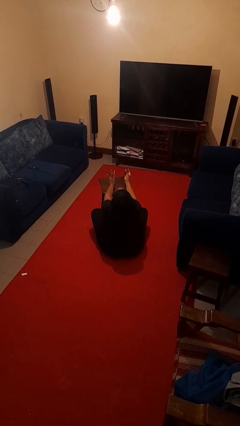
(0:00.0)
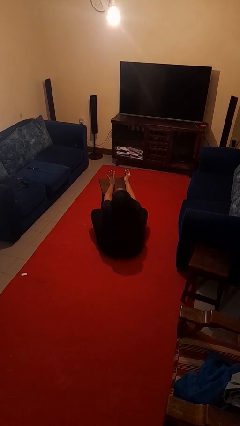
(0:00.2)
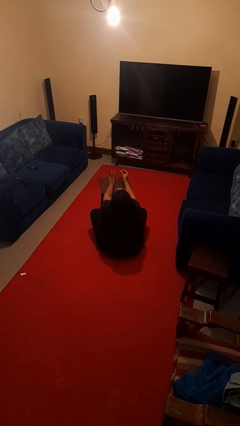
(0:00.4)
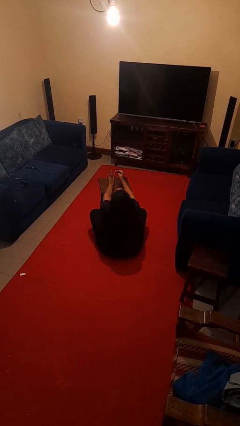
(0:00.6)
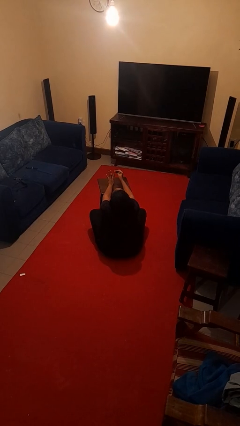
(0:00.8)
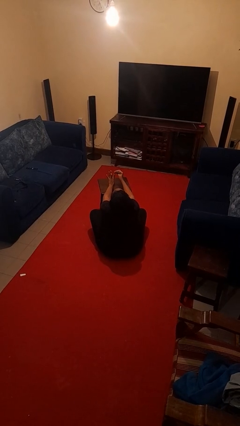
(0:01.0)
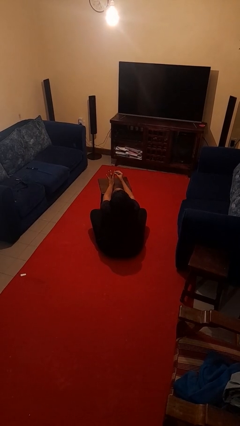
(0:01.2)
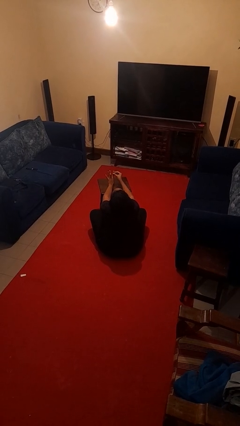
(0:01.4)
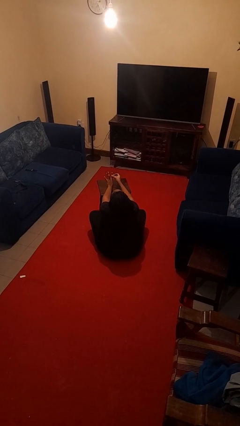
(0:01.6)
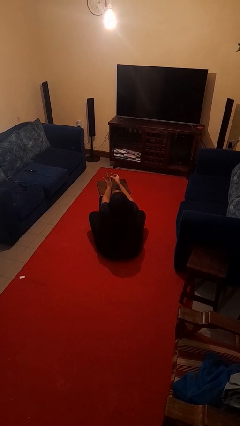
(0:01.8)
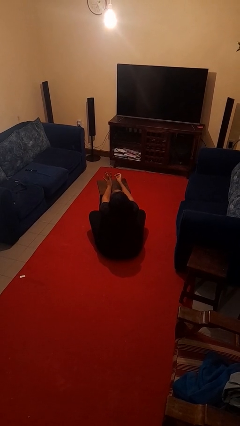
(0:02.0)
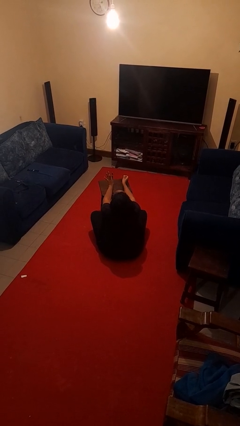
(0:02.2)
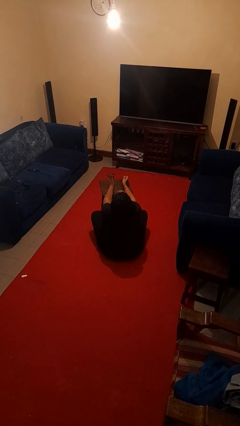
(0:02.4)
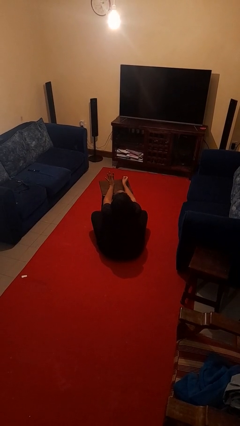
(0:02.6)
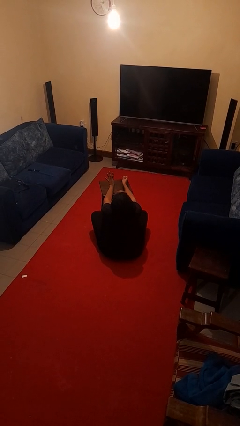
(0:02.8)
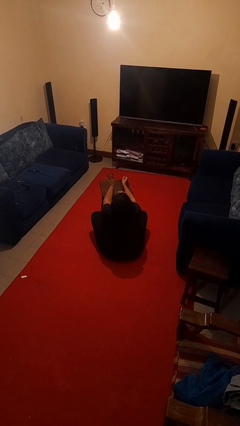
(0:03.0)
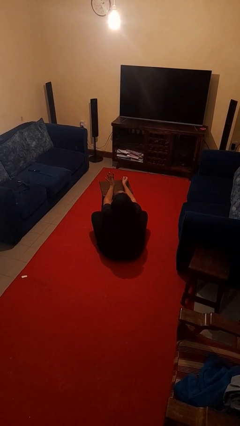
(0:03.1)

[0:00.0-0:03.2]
person puts on ring

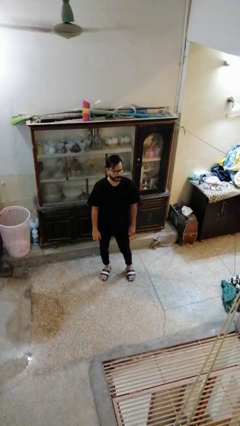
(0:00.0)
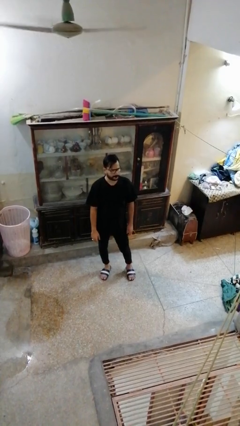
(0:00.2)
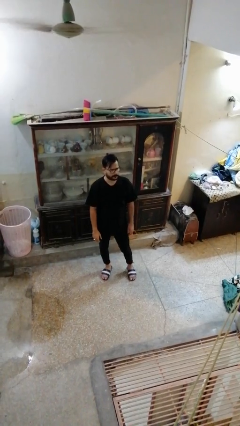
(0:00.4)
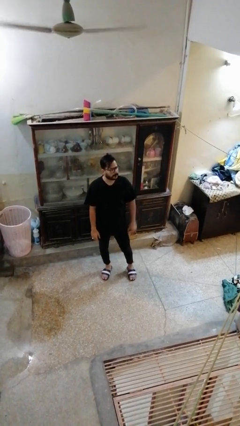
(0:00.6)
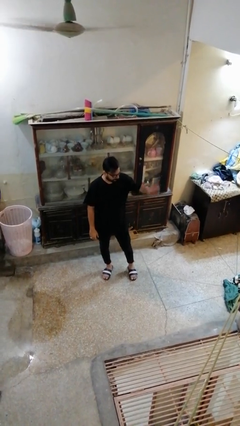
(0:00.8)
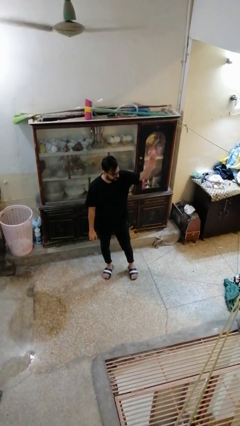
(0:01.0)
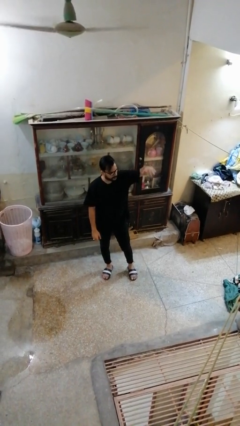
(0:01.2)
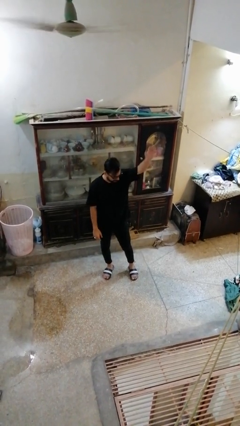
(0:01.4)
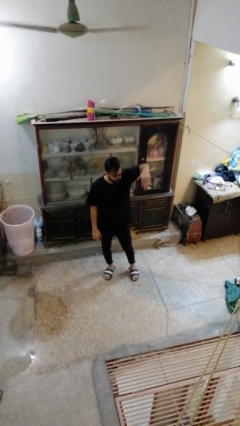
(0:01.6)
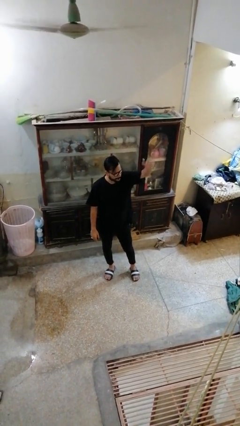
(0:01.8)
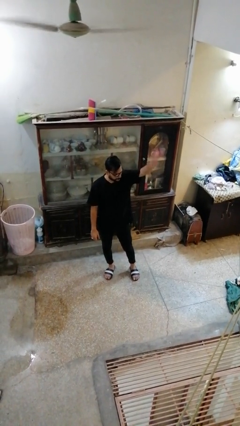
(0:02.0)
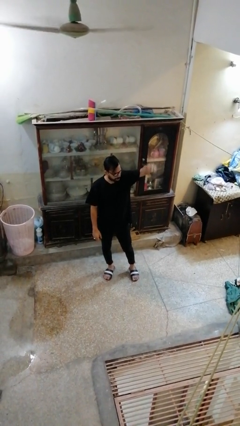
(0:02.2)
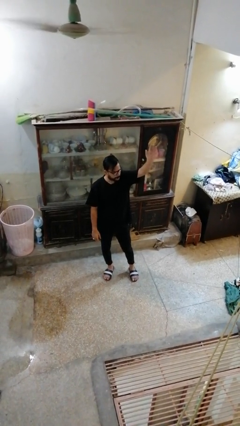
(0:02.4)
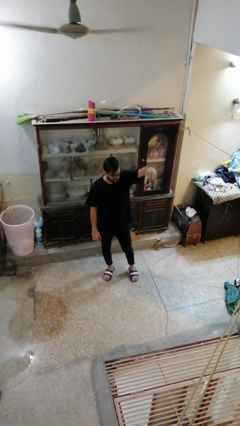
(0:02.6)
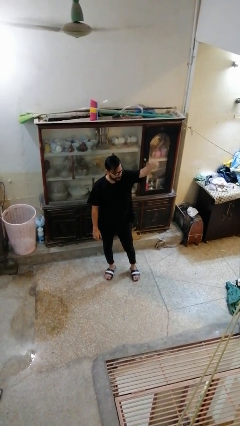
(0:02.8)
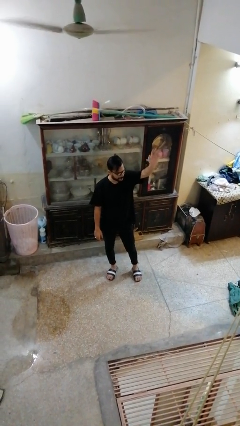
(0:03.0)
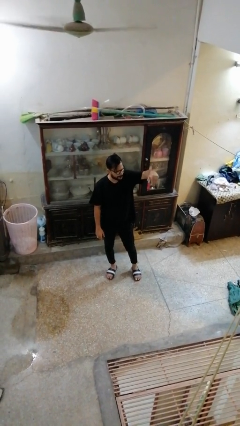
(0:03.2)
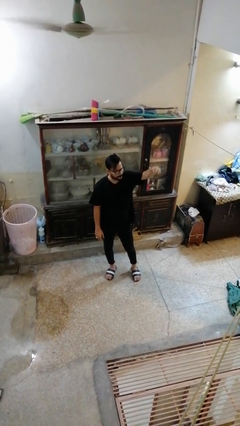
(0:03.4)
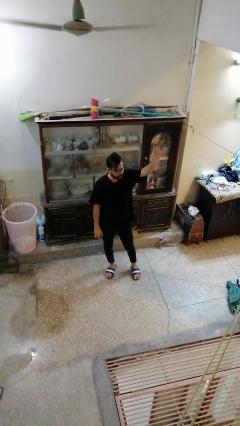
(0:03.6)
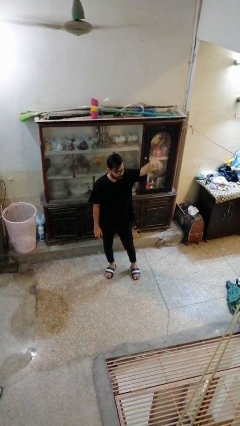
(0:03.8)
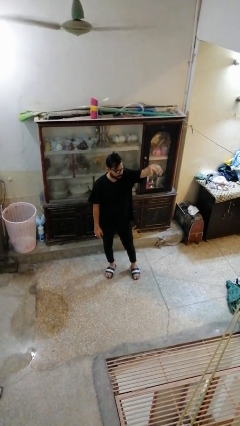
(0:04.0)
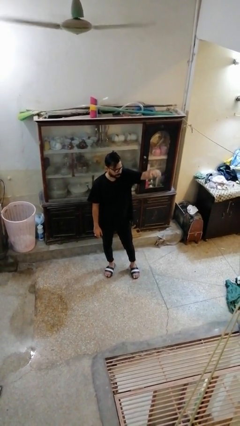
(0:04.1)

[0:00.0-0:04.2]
person gestures come here

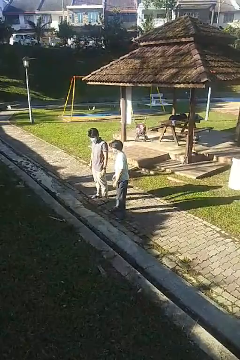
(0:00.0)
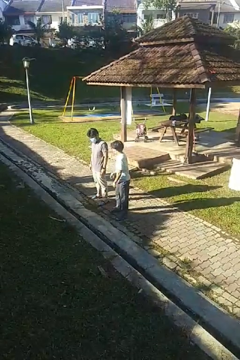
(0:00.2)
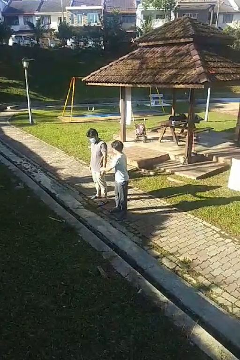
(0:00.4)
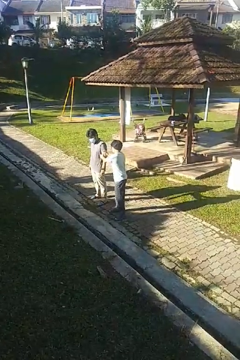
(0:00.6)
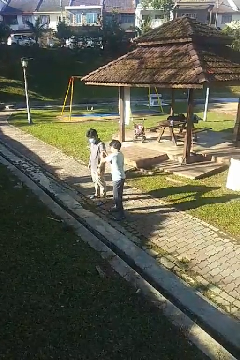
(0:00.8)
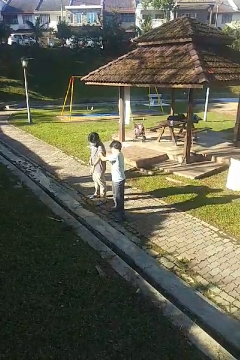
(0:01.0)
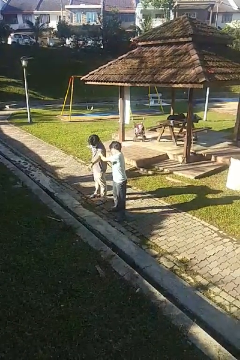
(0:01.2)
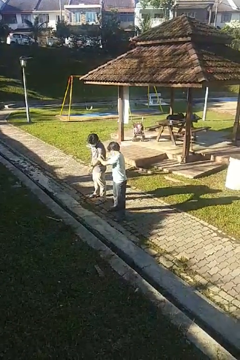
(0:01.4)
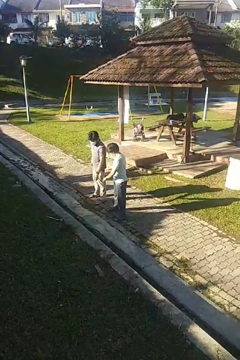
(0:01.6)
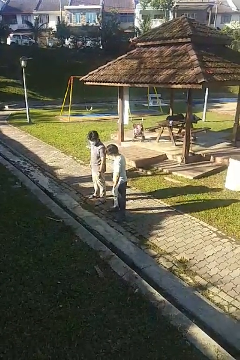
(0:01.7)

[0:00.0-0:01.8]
person grabs person by bicep

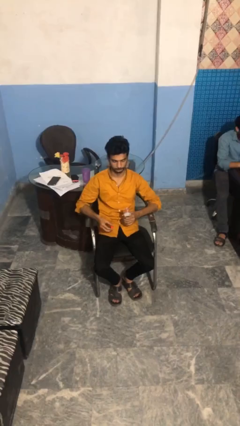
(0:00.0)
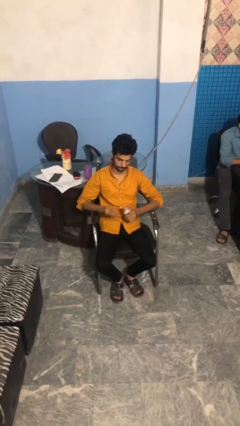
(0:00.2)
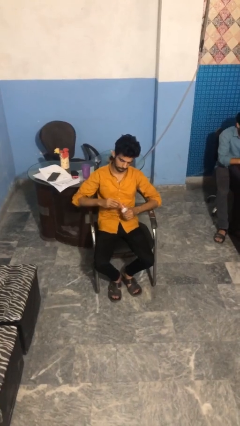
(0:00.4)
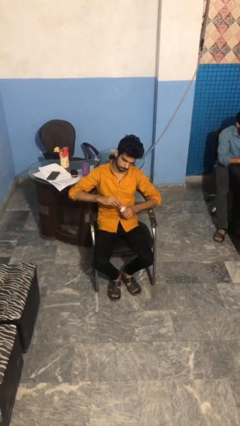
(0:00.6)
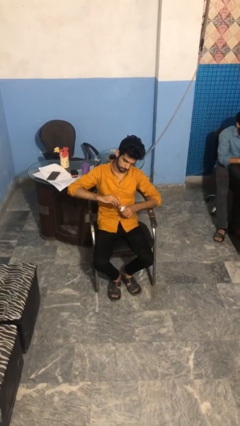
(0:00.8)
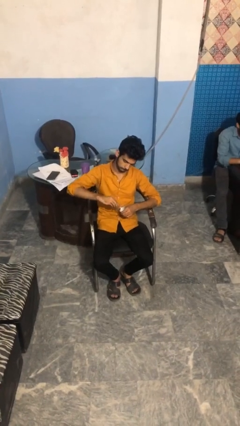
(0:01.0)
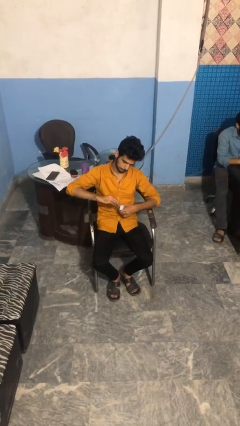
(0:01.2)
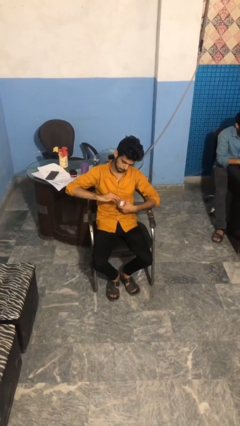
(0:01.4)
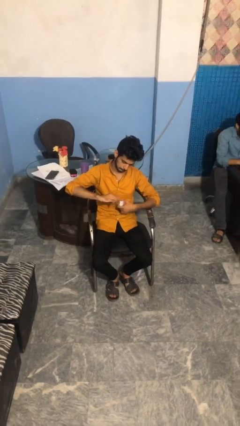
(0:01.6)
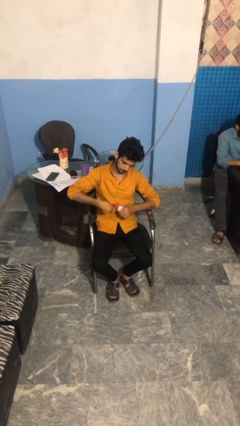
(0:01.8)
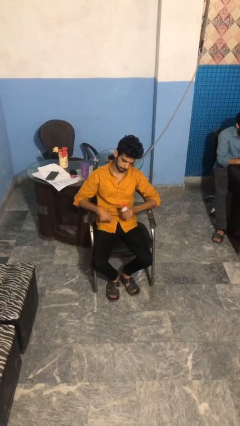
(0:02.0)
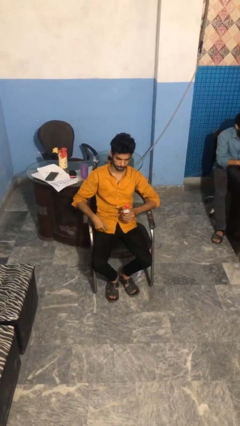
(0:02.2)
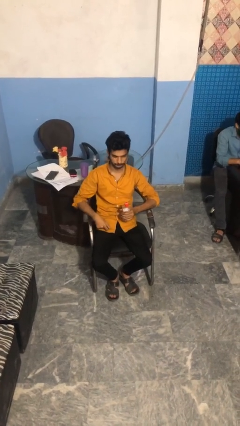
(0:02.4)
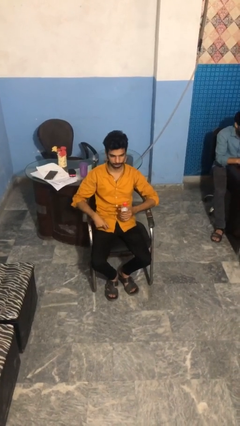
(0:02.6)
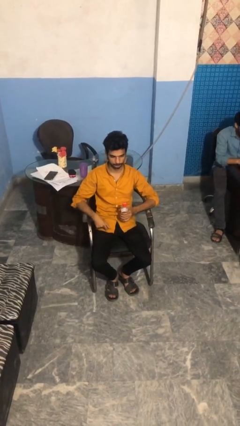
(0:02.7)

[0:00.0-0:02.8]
person screws lid to bottle

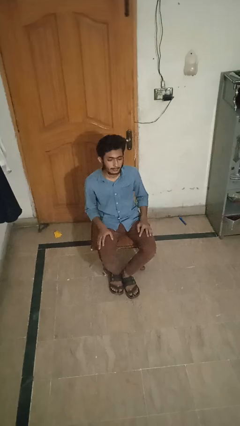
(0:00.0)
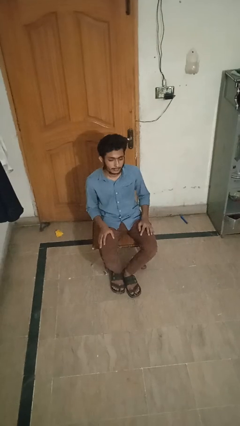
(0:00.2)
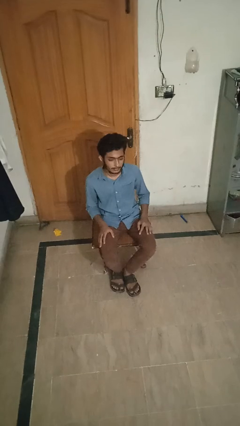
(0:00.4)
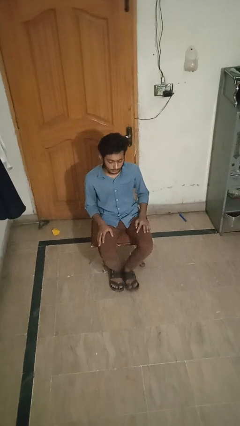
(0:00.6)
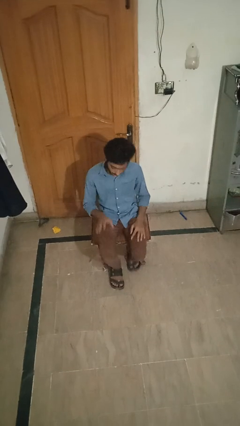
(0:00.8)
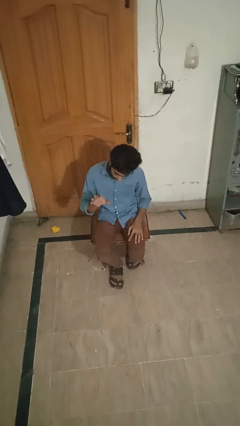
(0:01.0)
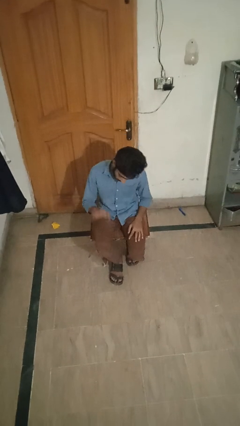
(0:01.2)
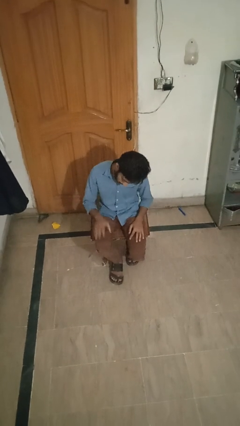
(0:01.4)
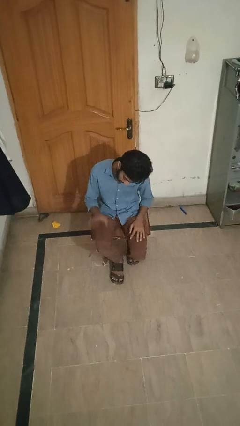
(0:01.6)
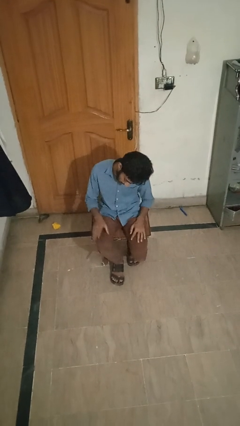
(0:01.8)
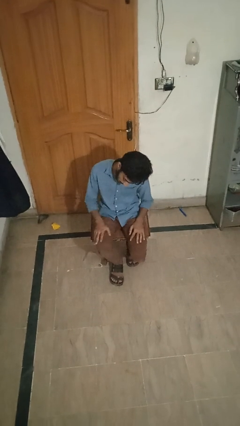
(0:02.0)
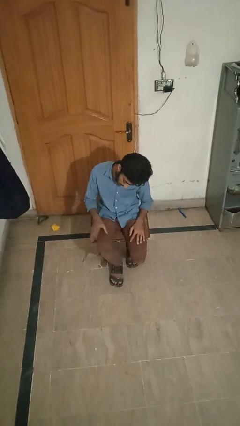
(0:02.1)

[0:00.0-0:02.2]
person slaps hands on thighs

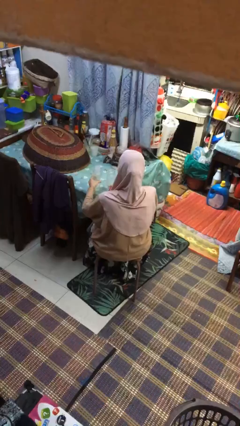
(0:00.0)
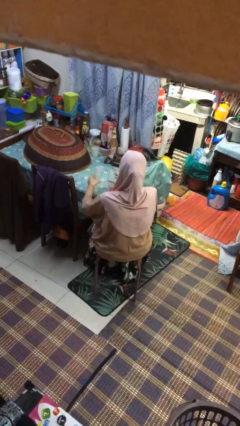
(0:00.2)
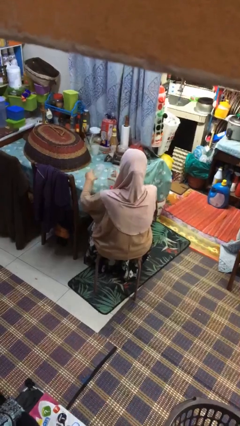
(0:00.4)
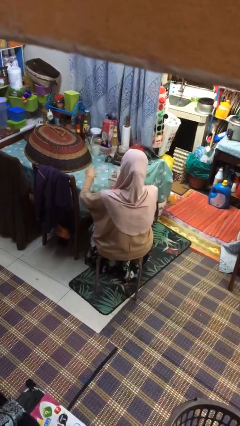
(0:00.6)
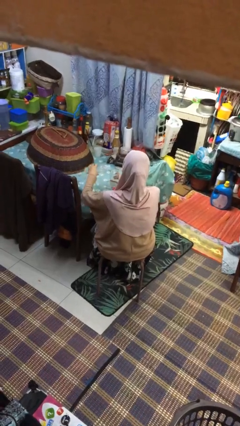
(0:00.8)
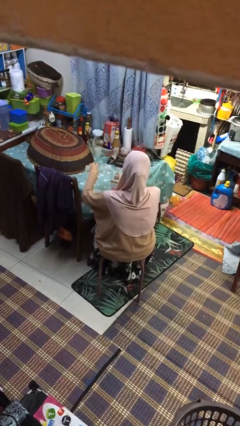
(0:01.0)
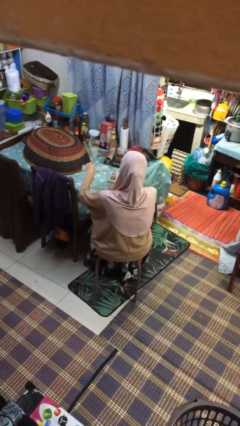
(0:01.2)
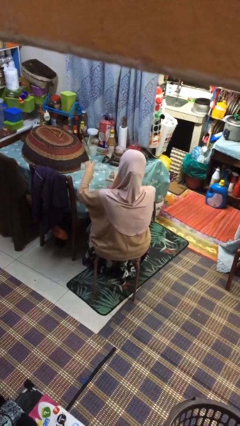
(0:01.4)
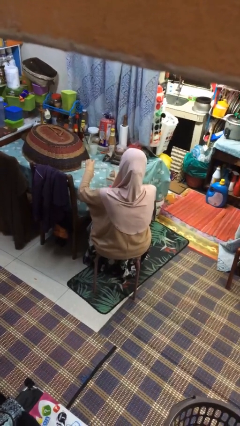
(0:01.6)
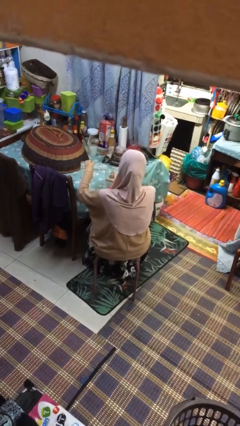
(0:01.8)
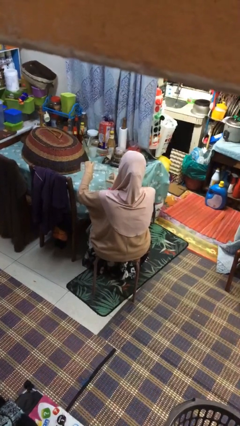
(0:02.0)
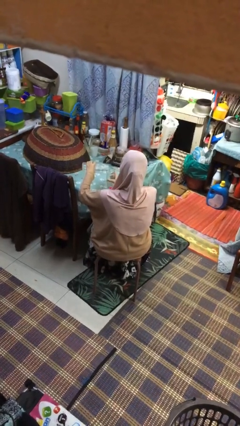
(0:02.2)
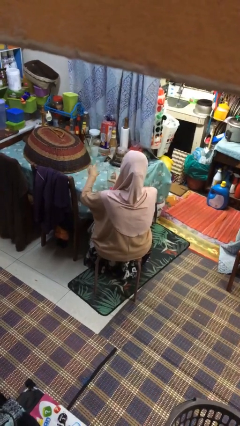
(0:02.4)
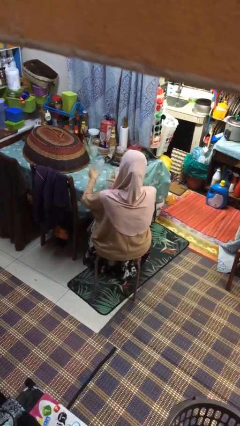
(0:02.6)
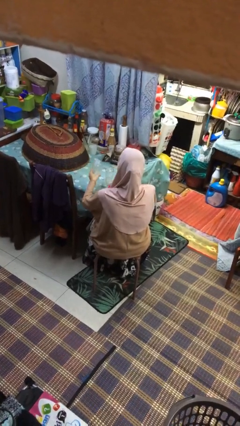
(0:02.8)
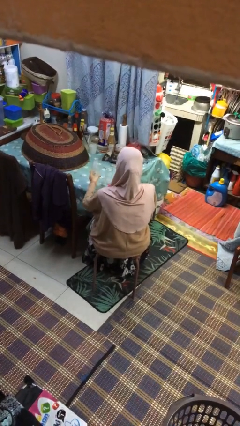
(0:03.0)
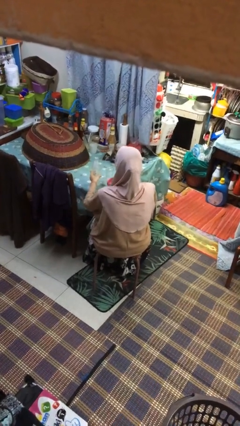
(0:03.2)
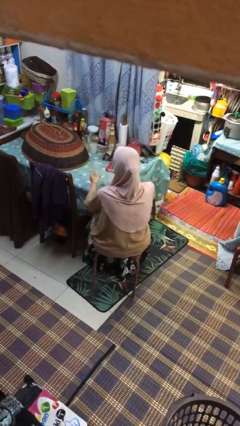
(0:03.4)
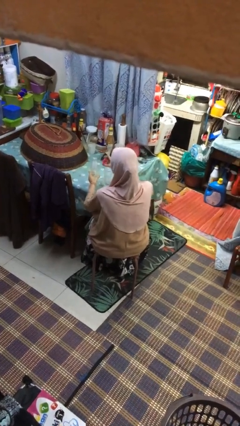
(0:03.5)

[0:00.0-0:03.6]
person pours liquid into cup
